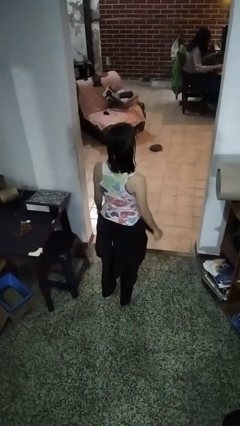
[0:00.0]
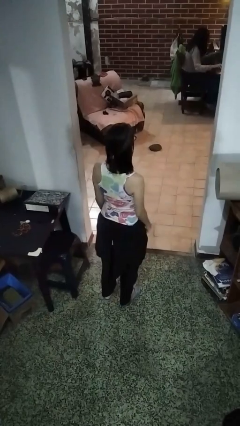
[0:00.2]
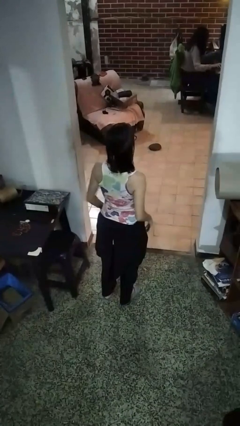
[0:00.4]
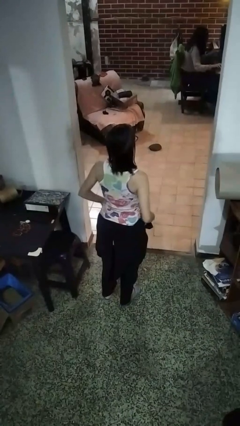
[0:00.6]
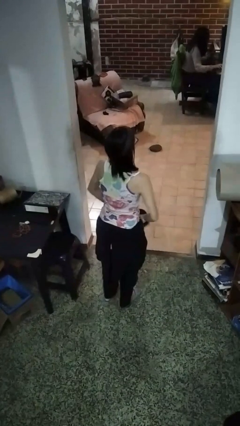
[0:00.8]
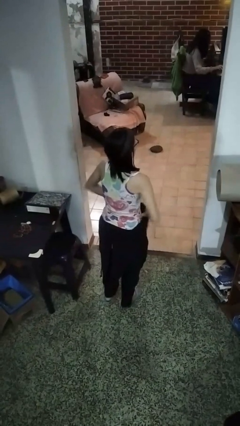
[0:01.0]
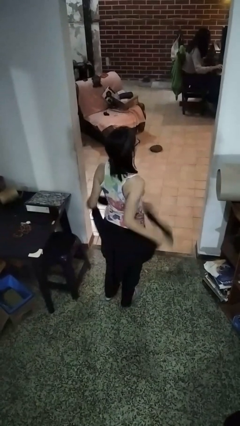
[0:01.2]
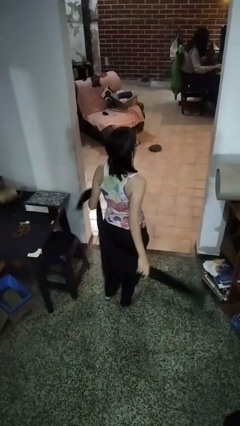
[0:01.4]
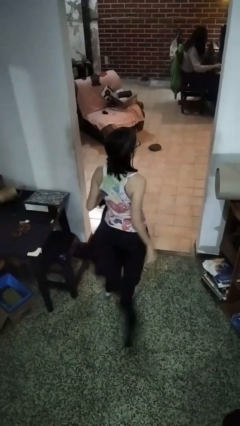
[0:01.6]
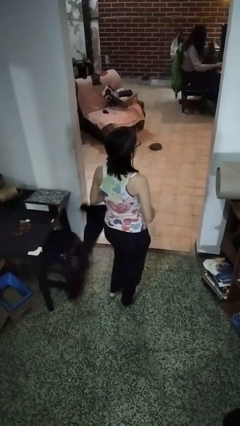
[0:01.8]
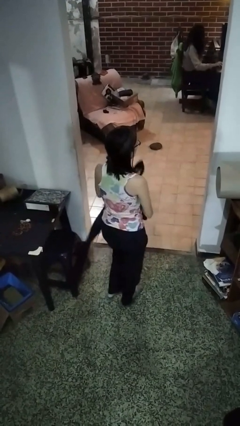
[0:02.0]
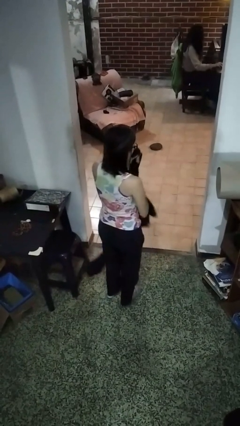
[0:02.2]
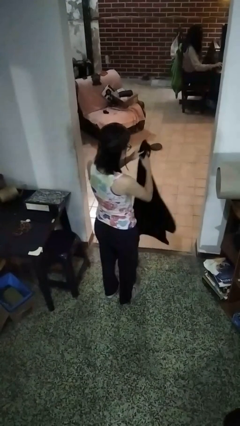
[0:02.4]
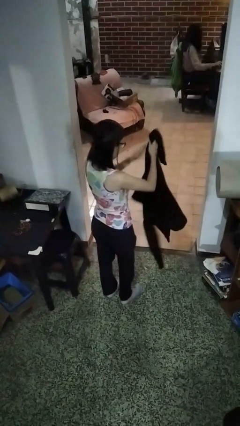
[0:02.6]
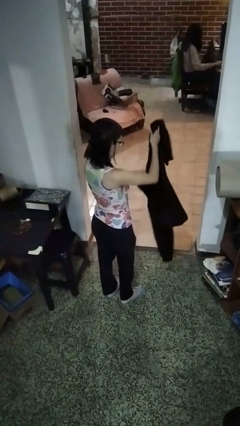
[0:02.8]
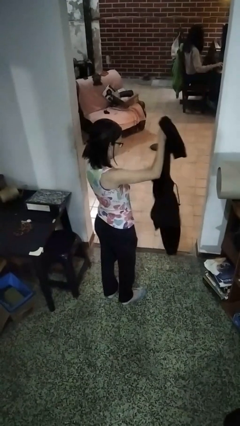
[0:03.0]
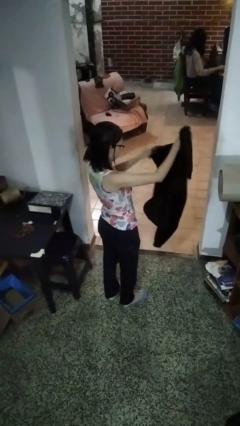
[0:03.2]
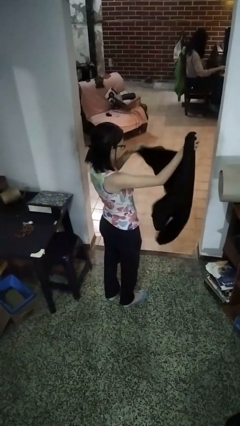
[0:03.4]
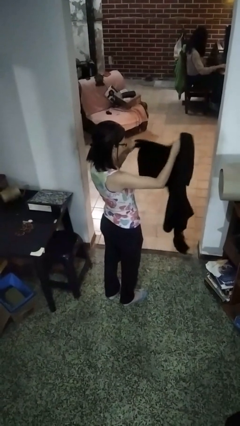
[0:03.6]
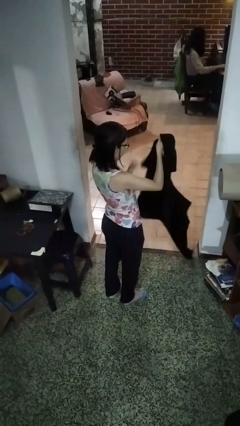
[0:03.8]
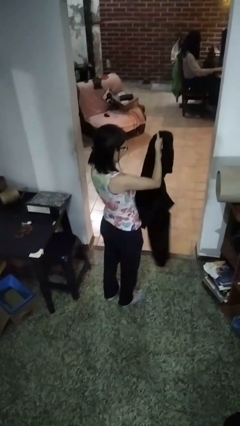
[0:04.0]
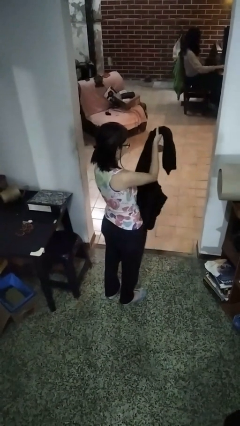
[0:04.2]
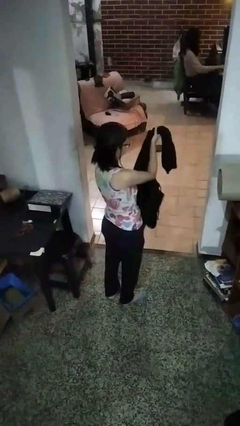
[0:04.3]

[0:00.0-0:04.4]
person unties jacket around waist

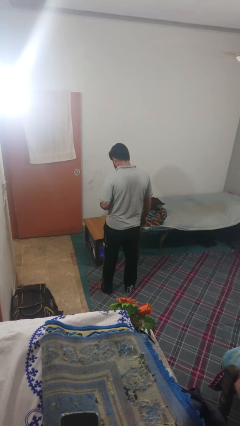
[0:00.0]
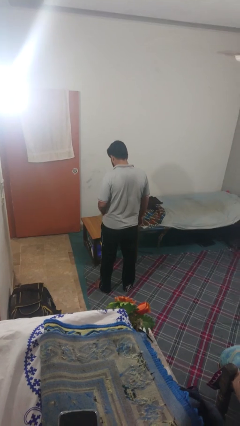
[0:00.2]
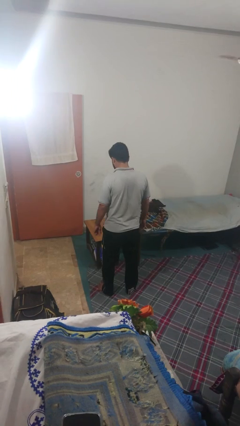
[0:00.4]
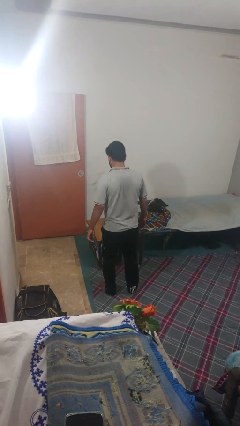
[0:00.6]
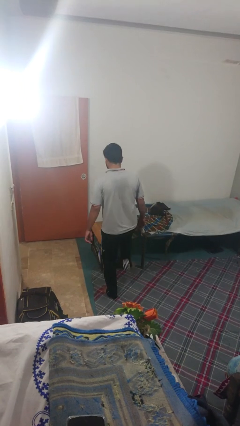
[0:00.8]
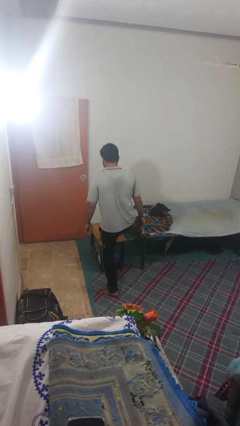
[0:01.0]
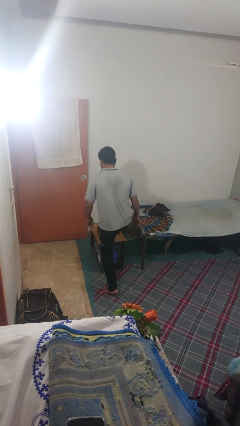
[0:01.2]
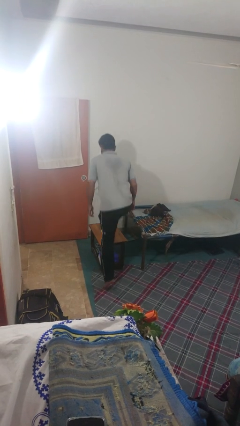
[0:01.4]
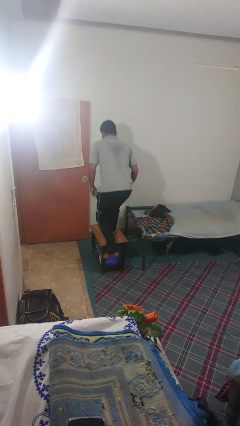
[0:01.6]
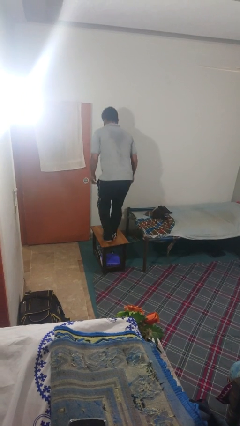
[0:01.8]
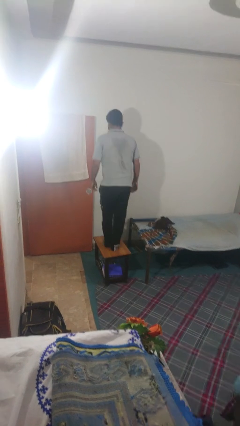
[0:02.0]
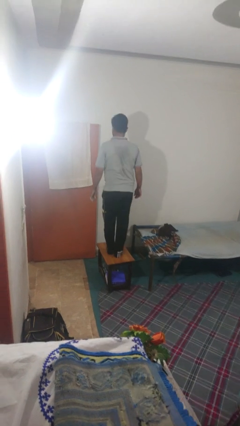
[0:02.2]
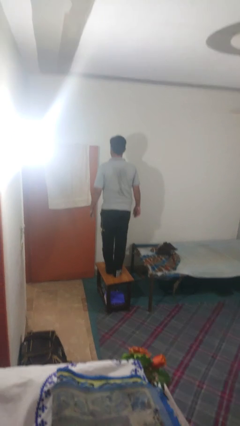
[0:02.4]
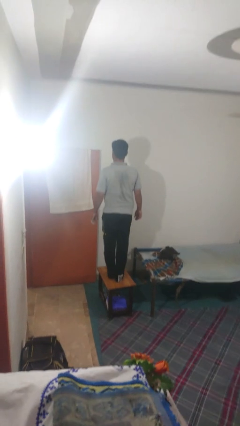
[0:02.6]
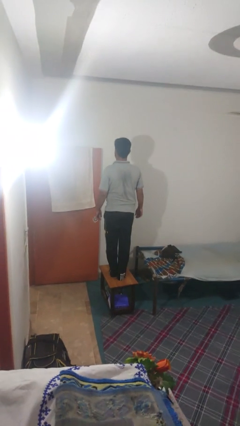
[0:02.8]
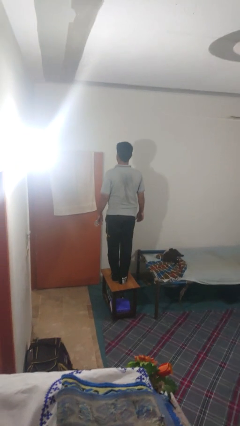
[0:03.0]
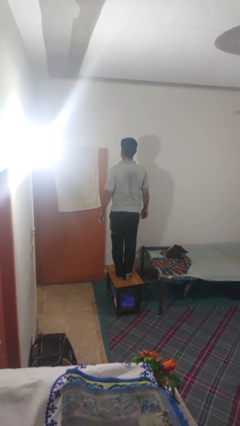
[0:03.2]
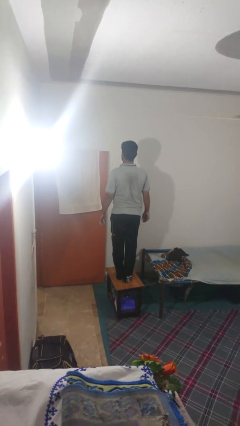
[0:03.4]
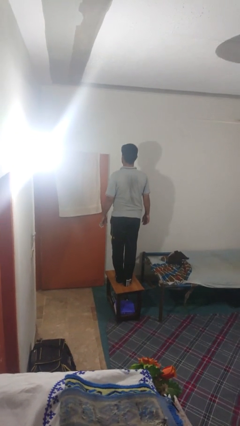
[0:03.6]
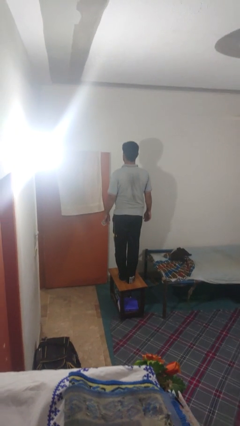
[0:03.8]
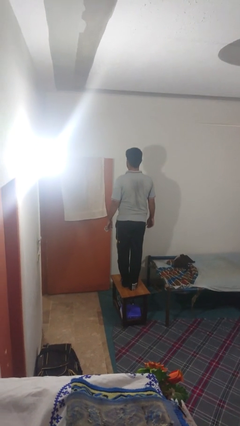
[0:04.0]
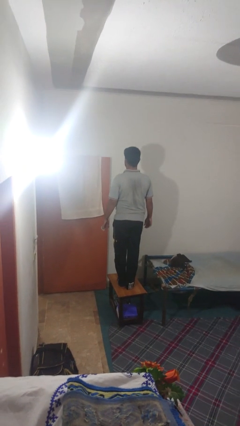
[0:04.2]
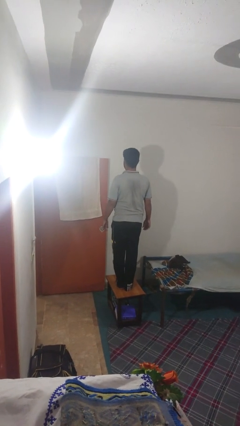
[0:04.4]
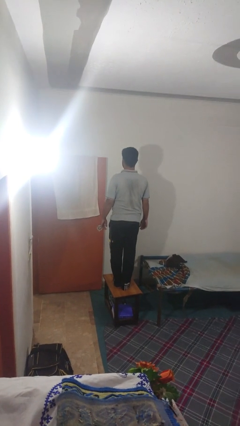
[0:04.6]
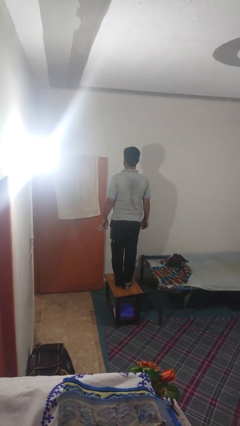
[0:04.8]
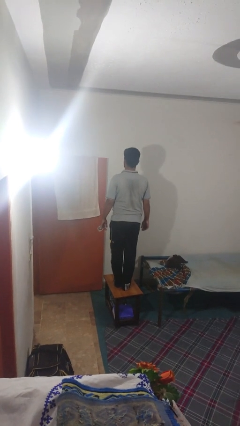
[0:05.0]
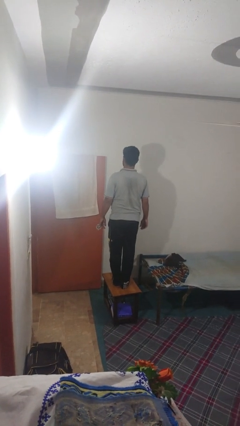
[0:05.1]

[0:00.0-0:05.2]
person climbs on table

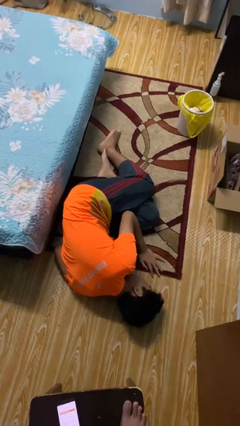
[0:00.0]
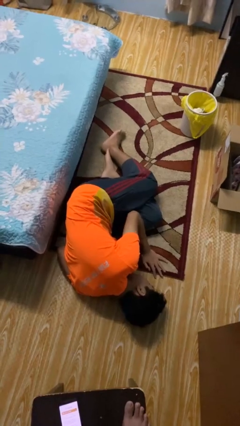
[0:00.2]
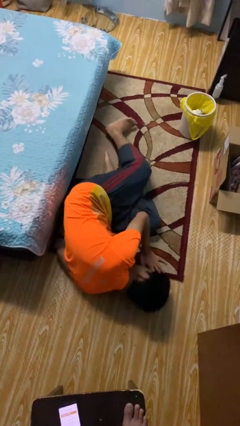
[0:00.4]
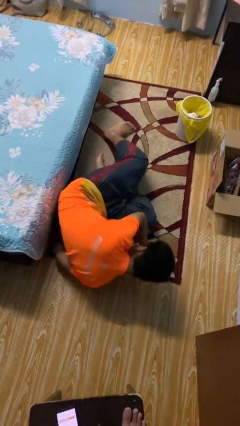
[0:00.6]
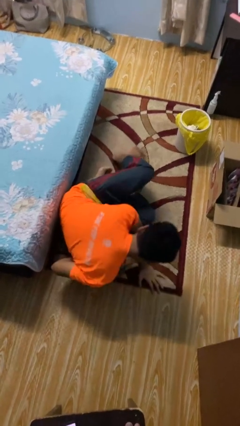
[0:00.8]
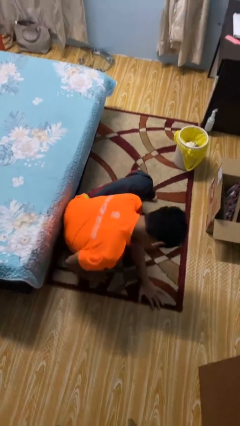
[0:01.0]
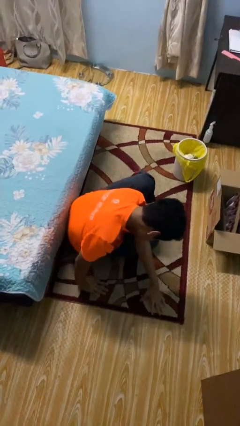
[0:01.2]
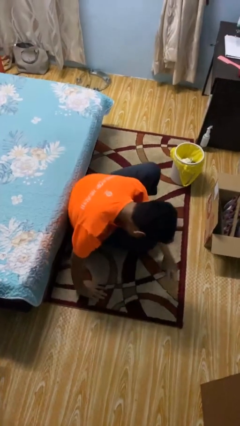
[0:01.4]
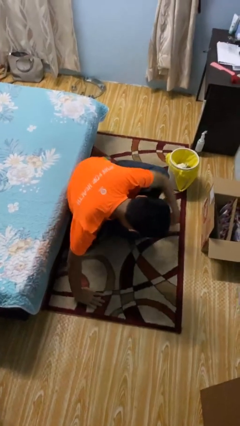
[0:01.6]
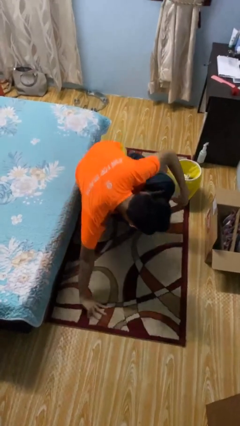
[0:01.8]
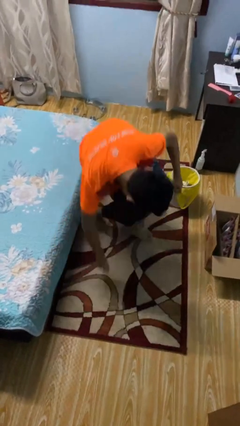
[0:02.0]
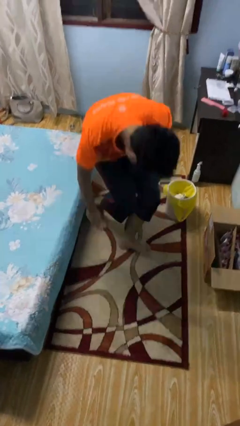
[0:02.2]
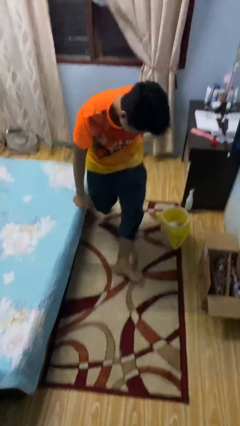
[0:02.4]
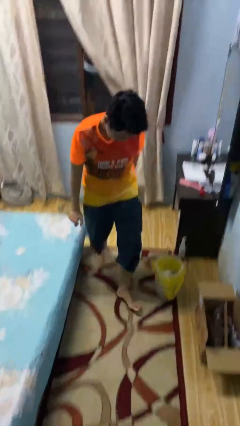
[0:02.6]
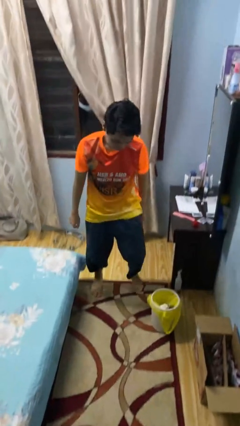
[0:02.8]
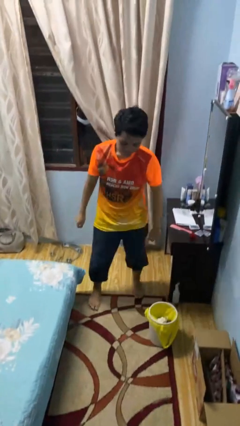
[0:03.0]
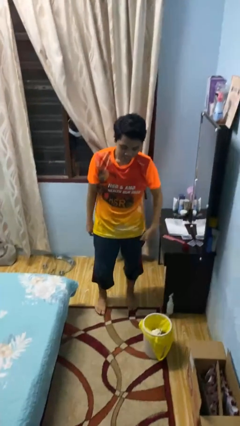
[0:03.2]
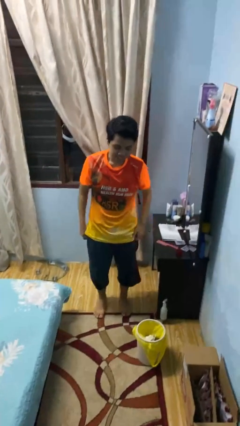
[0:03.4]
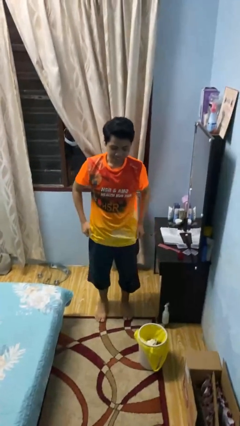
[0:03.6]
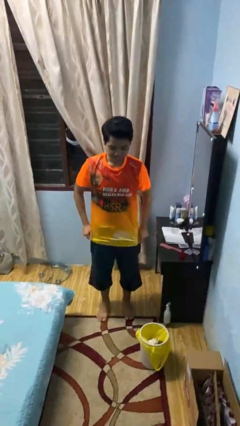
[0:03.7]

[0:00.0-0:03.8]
person stands up from floor

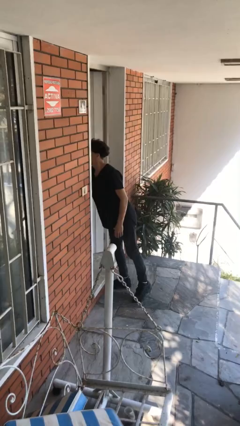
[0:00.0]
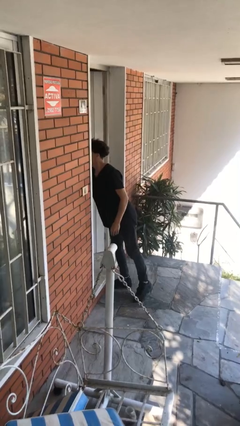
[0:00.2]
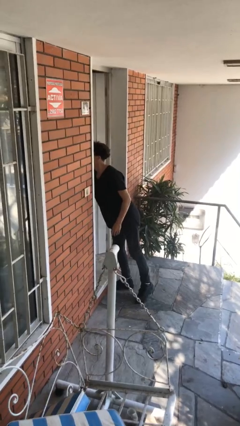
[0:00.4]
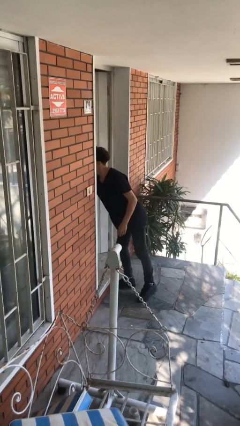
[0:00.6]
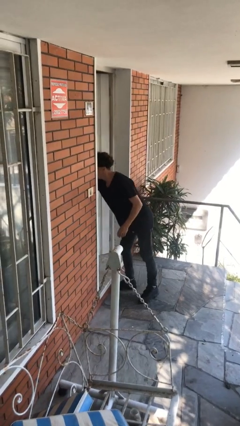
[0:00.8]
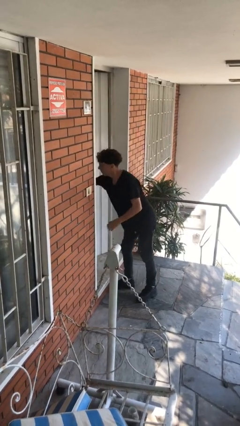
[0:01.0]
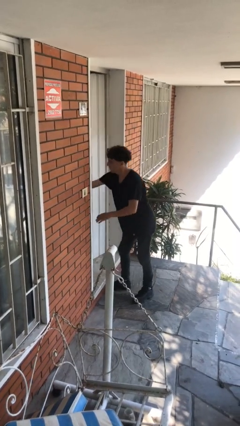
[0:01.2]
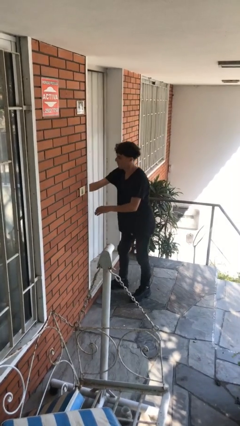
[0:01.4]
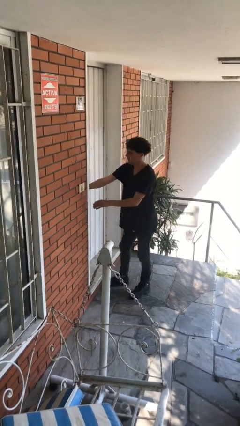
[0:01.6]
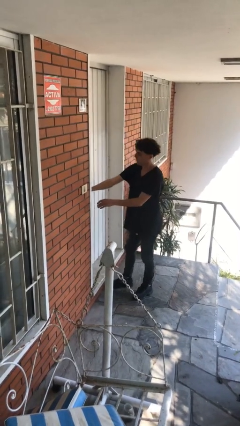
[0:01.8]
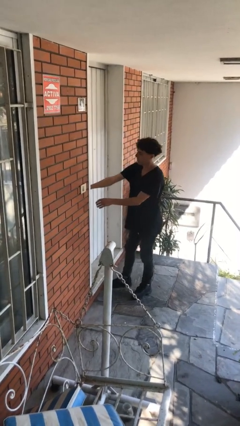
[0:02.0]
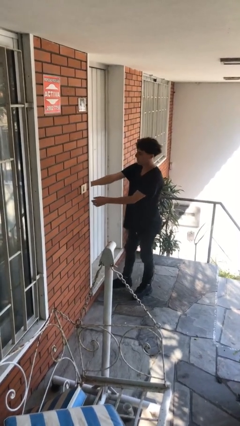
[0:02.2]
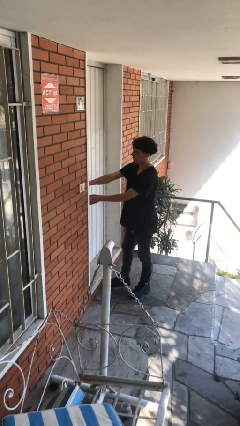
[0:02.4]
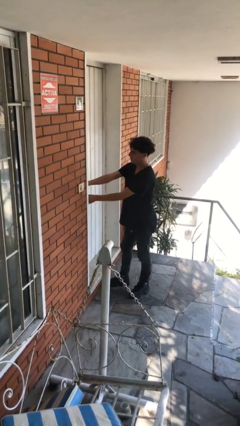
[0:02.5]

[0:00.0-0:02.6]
person closes facility door

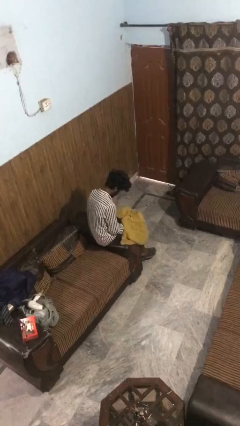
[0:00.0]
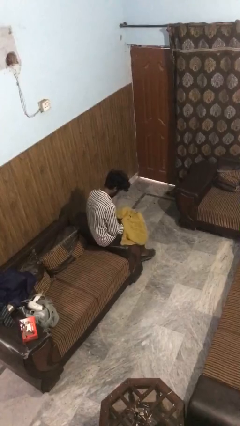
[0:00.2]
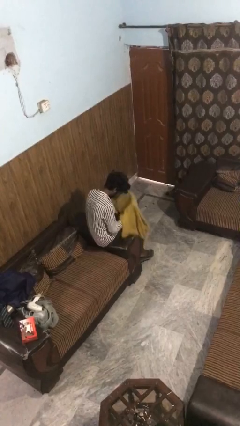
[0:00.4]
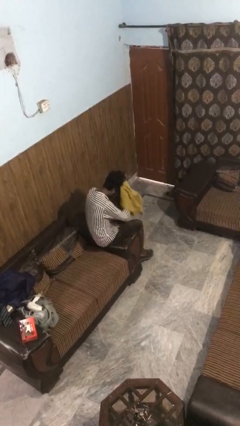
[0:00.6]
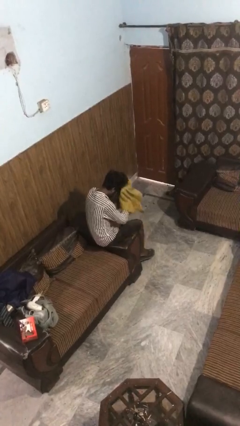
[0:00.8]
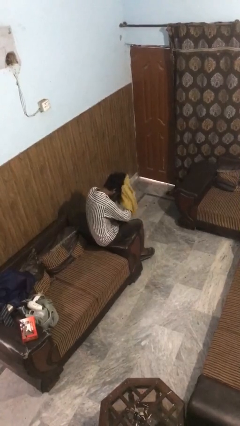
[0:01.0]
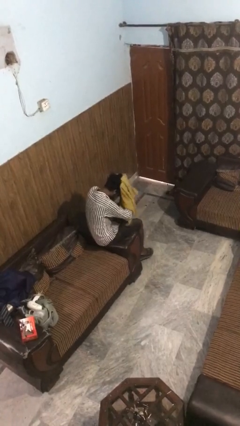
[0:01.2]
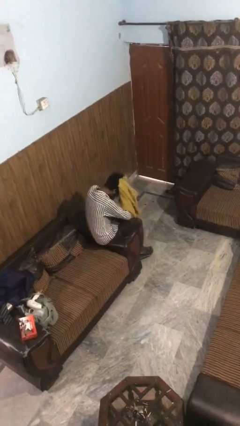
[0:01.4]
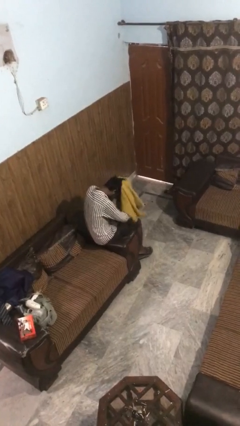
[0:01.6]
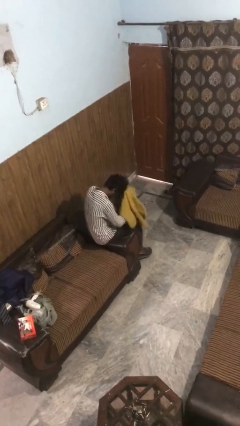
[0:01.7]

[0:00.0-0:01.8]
person dries hair with towel
